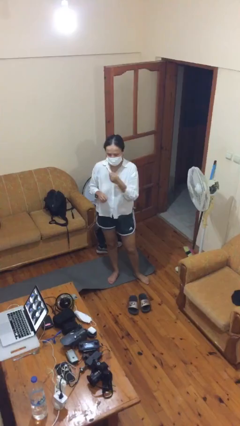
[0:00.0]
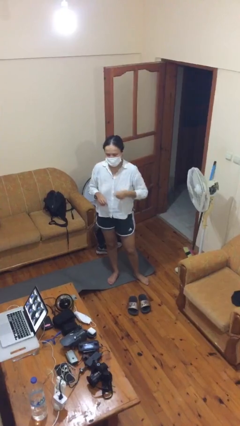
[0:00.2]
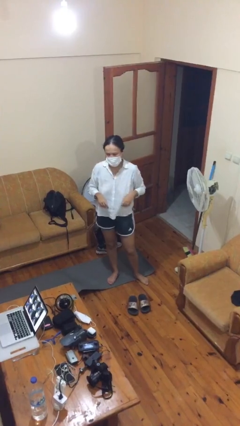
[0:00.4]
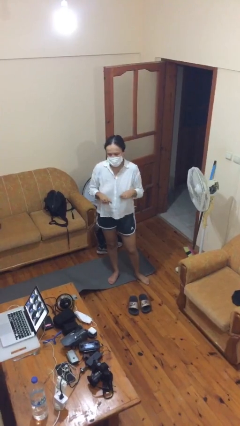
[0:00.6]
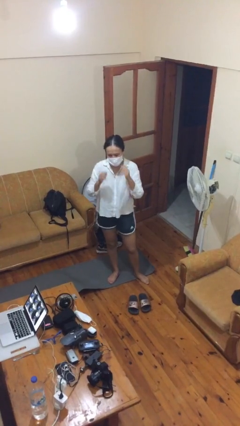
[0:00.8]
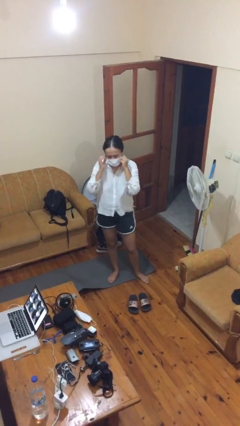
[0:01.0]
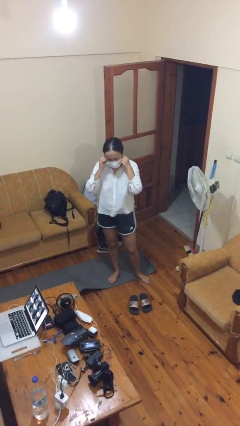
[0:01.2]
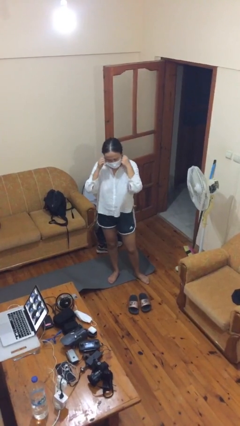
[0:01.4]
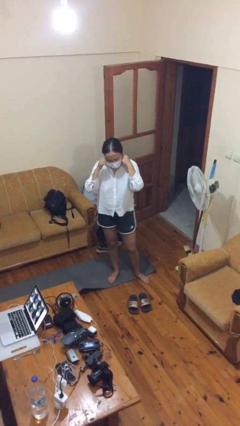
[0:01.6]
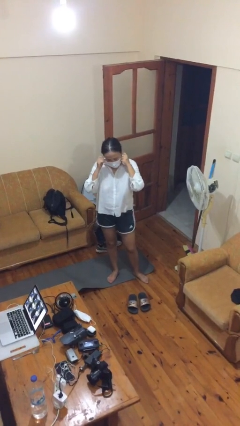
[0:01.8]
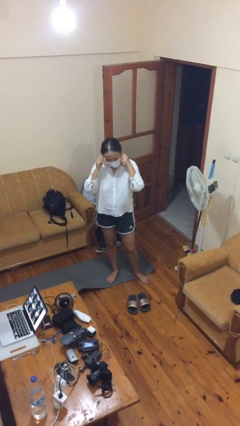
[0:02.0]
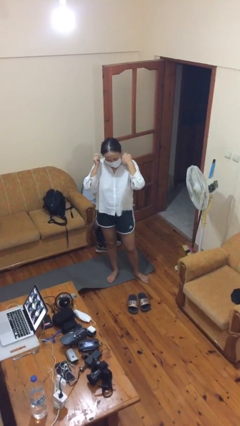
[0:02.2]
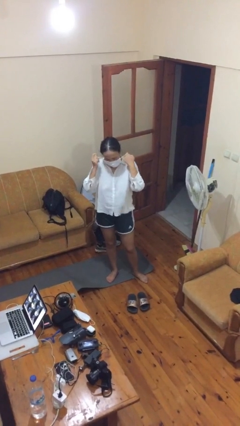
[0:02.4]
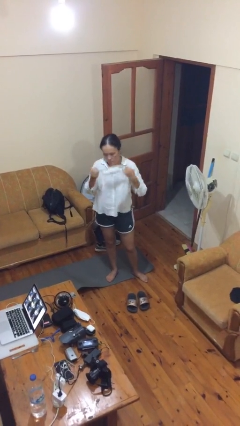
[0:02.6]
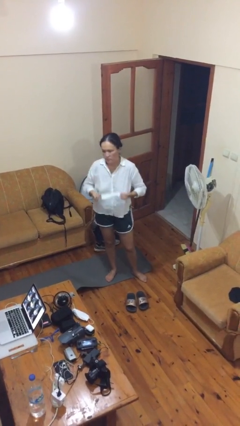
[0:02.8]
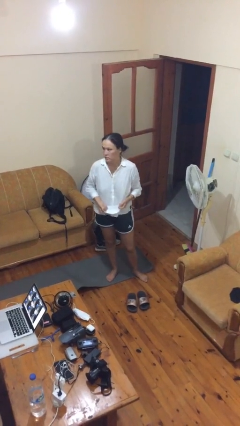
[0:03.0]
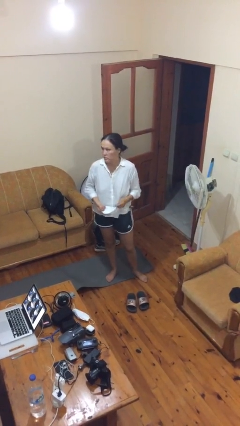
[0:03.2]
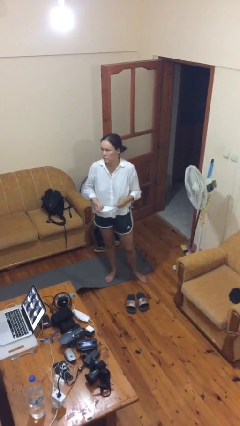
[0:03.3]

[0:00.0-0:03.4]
person takes off facemask

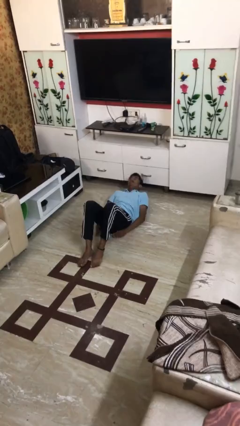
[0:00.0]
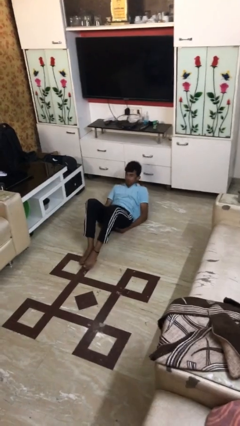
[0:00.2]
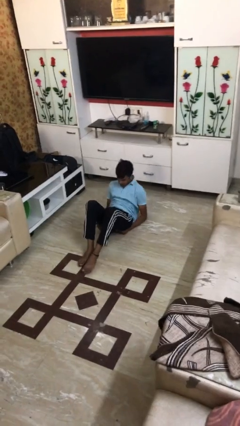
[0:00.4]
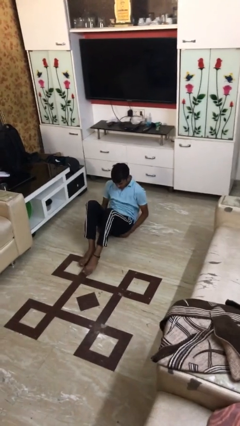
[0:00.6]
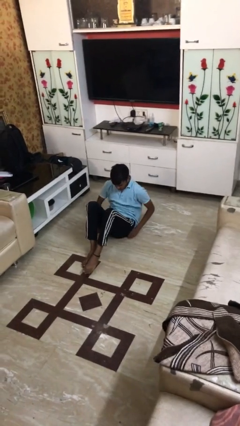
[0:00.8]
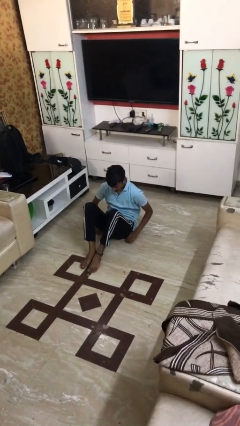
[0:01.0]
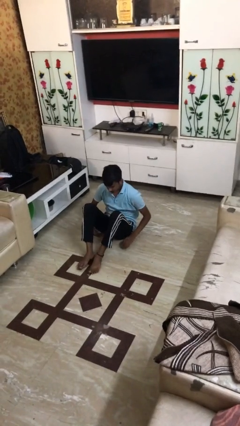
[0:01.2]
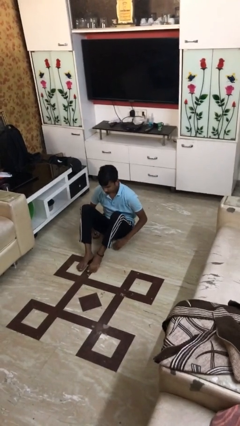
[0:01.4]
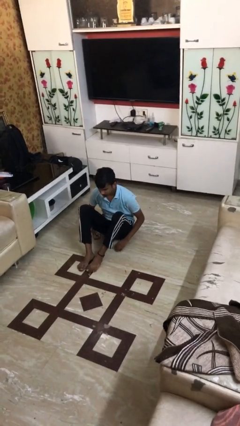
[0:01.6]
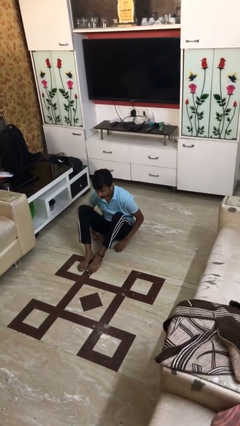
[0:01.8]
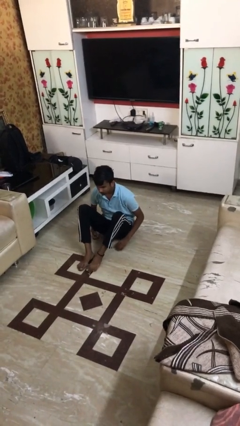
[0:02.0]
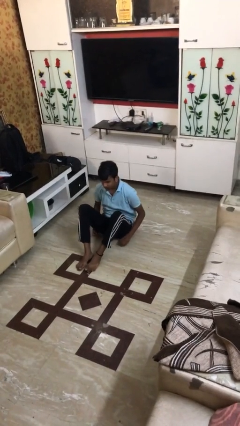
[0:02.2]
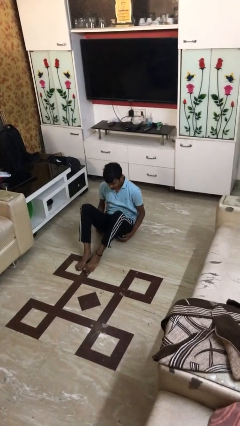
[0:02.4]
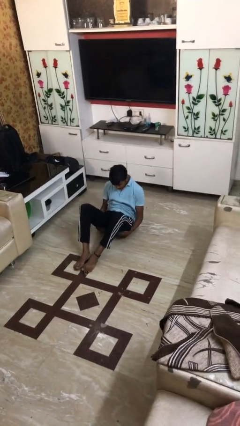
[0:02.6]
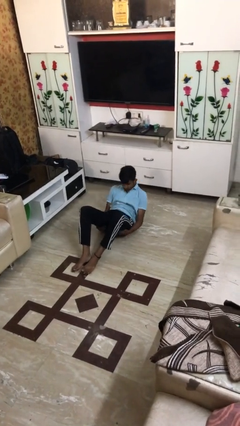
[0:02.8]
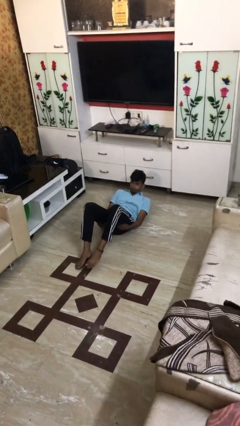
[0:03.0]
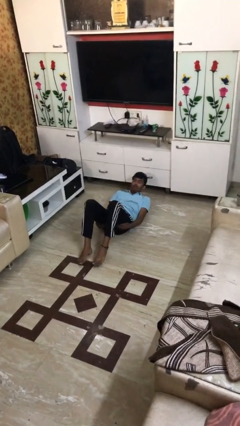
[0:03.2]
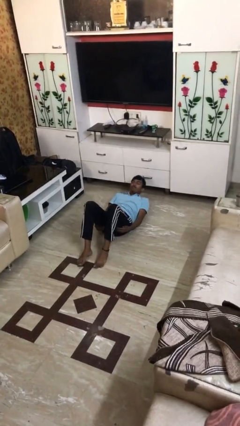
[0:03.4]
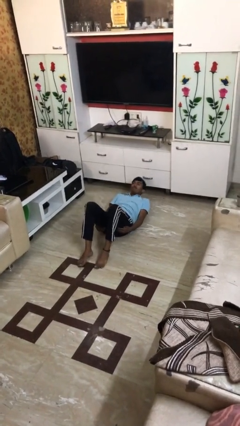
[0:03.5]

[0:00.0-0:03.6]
person exercises with situp

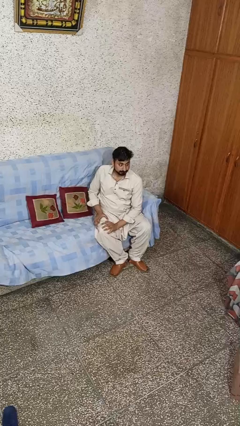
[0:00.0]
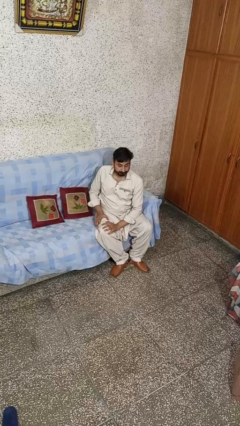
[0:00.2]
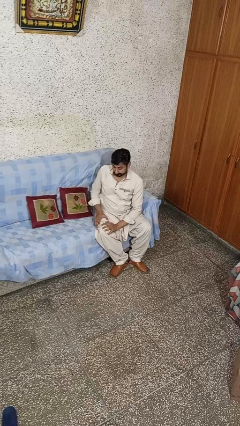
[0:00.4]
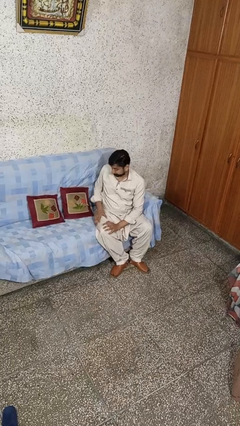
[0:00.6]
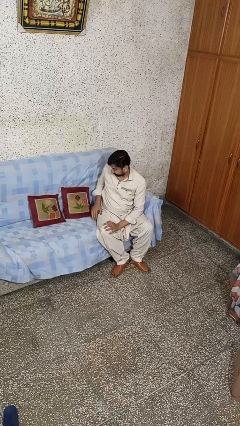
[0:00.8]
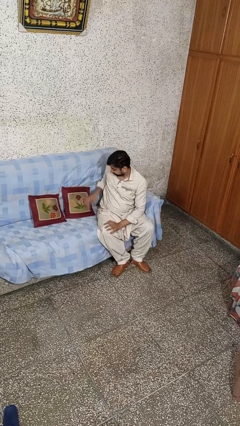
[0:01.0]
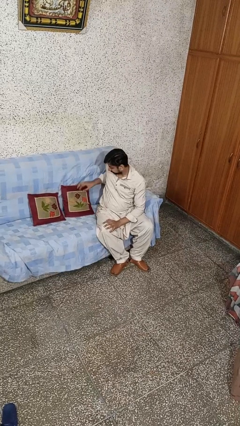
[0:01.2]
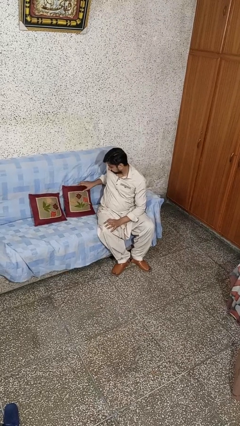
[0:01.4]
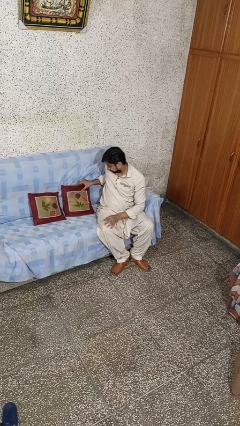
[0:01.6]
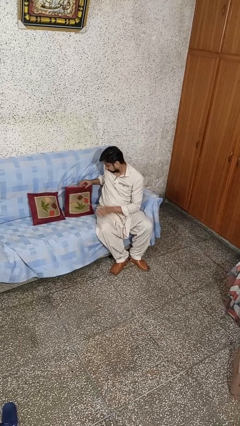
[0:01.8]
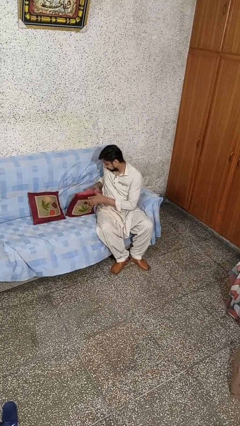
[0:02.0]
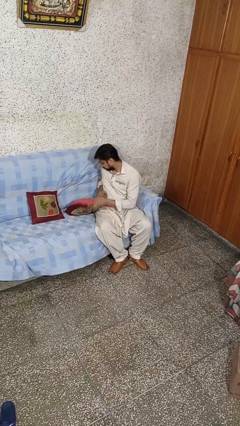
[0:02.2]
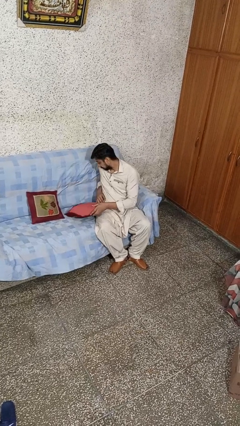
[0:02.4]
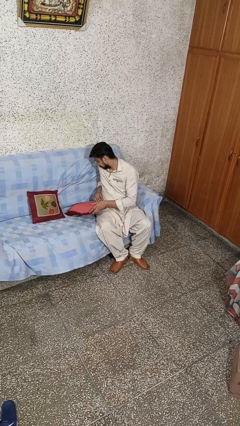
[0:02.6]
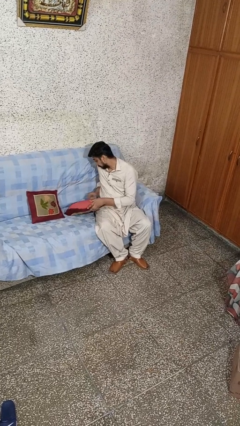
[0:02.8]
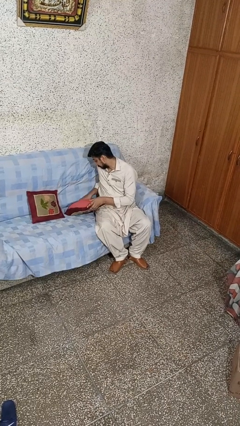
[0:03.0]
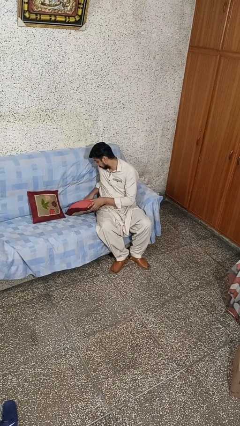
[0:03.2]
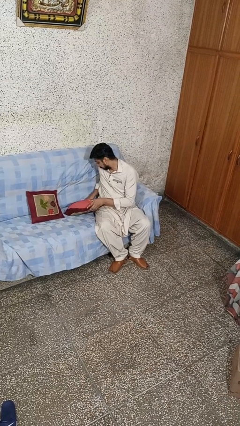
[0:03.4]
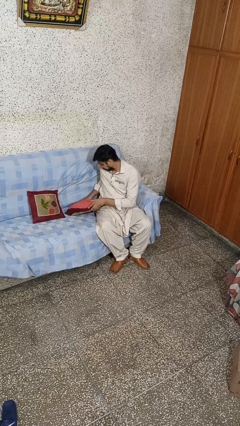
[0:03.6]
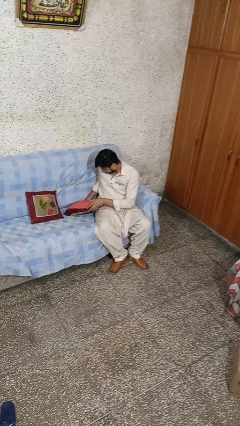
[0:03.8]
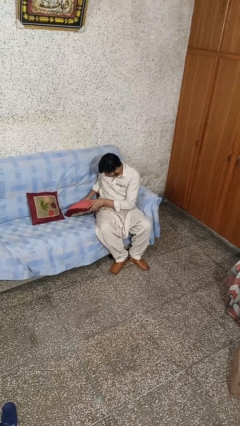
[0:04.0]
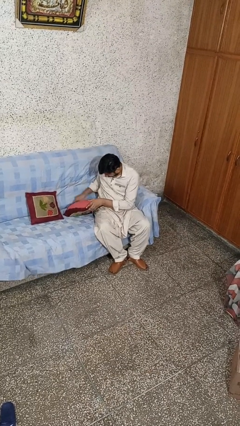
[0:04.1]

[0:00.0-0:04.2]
person searches in couch

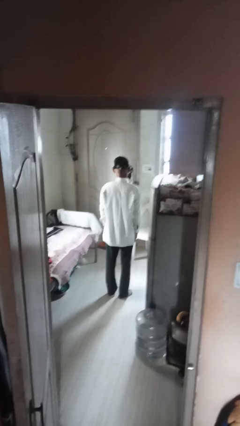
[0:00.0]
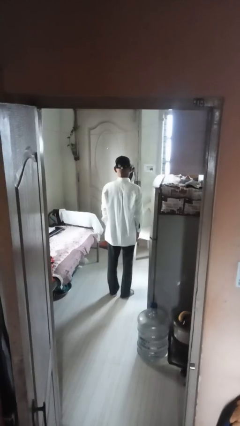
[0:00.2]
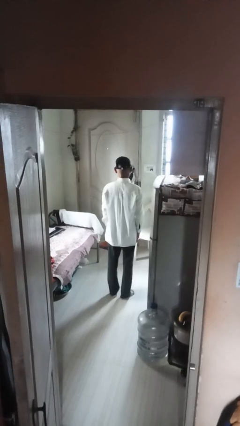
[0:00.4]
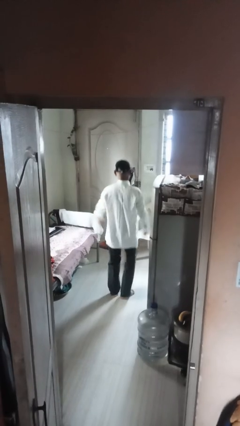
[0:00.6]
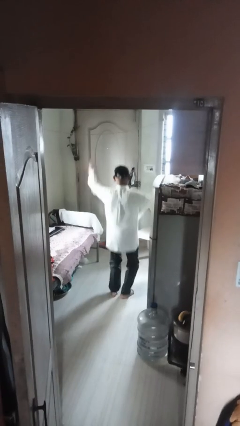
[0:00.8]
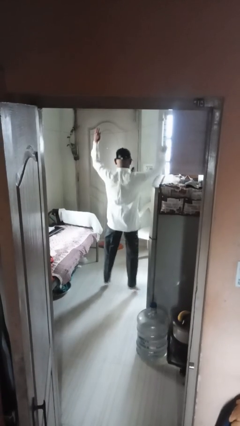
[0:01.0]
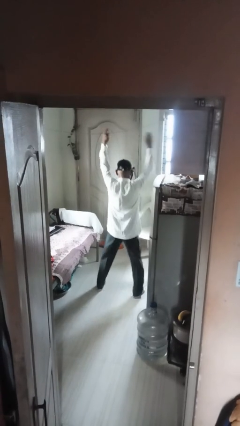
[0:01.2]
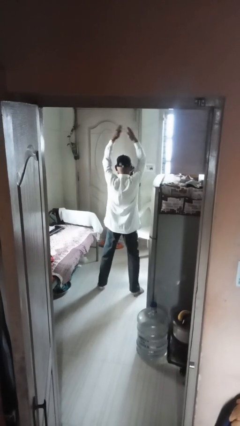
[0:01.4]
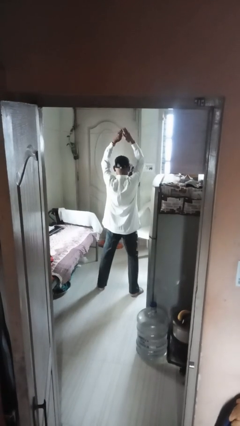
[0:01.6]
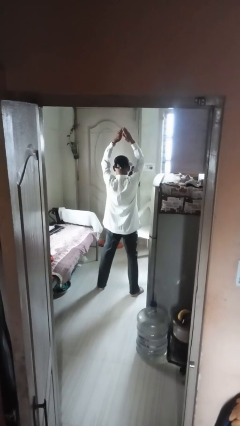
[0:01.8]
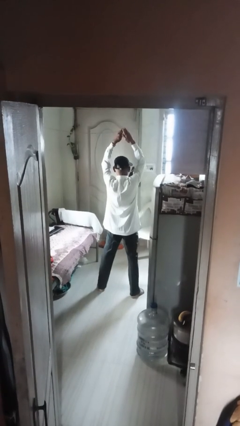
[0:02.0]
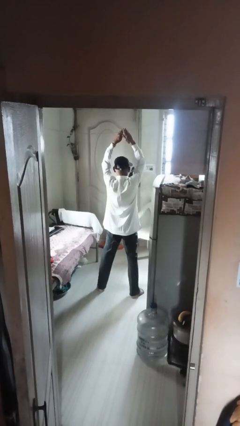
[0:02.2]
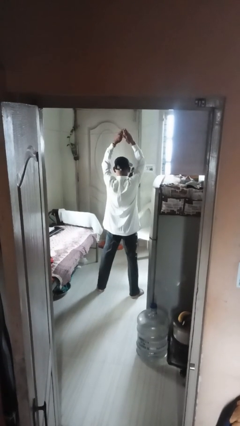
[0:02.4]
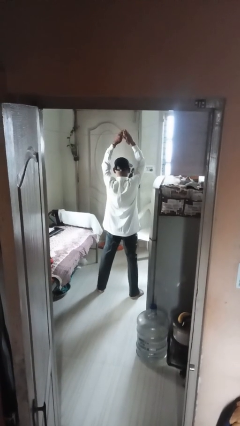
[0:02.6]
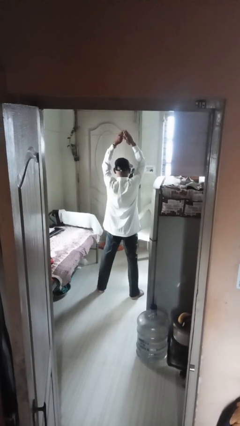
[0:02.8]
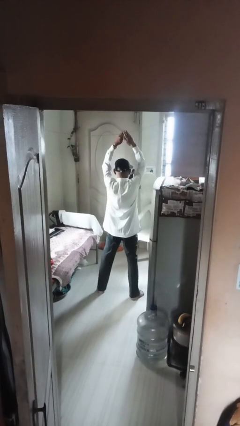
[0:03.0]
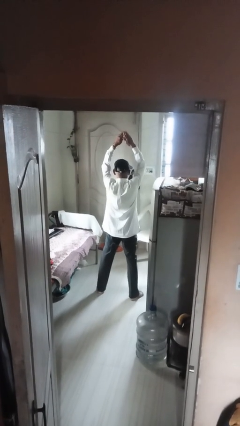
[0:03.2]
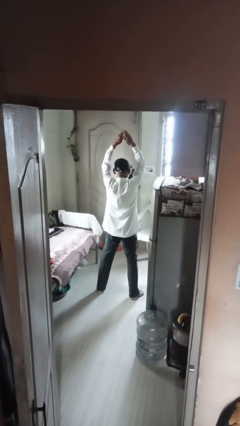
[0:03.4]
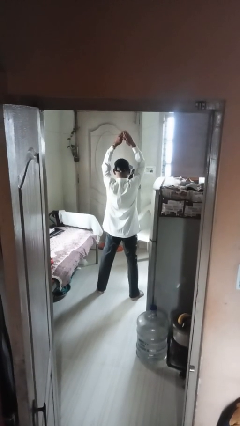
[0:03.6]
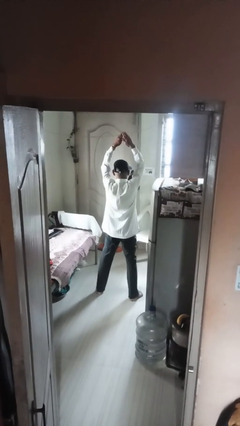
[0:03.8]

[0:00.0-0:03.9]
person exercises with jumping jacks

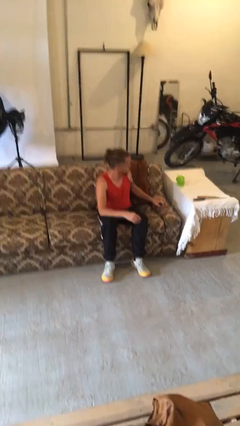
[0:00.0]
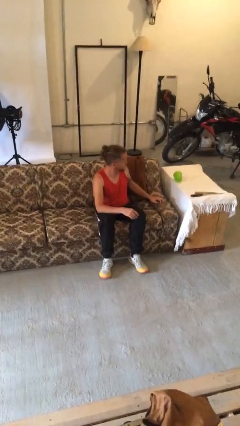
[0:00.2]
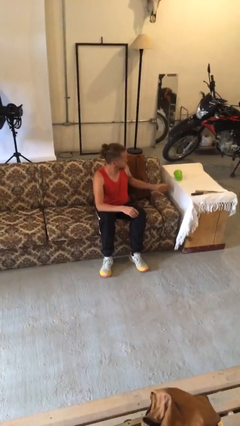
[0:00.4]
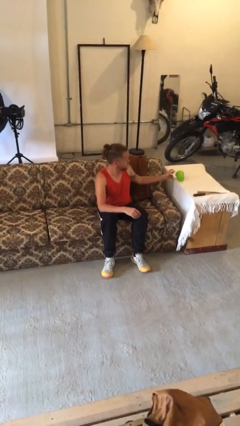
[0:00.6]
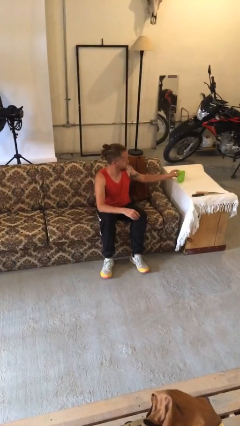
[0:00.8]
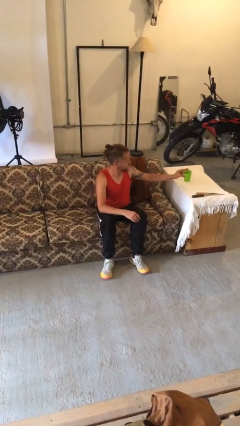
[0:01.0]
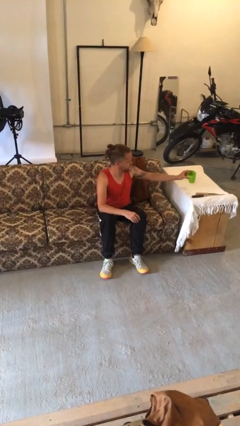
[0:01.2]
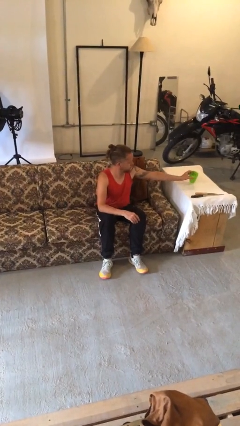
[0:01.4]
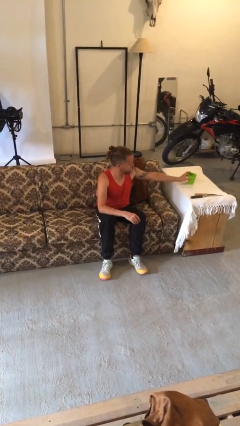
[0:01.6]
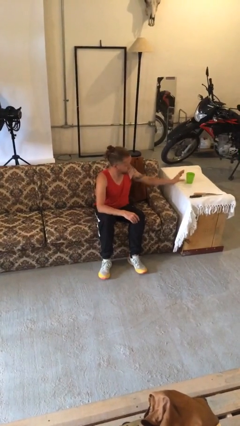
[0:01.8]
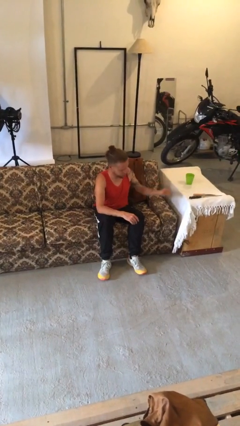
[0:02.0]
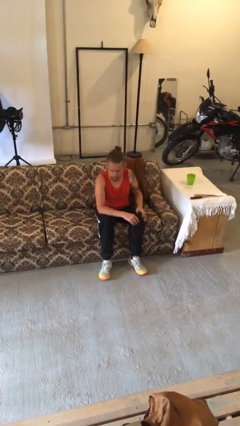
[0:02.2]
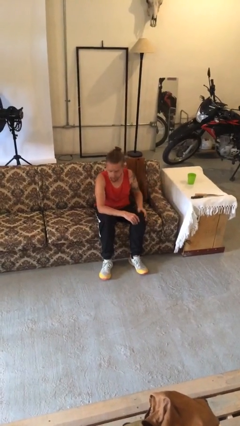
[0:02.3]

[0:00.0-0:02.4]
person sets upright glass

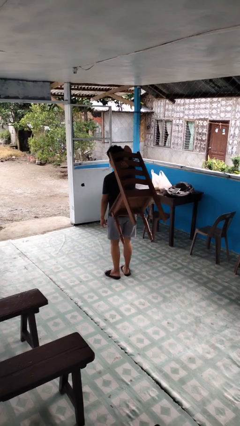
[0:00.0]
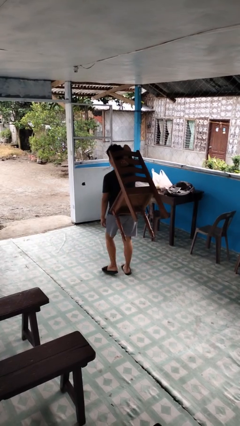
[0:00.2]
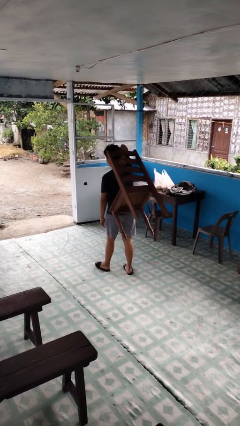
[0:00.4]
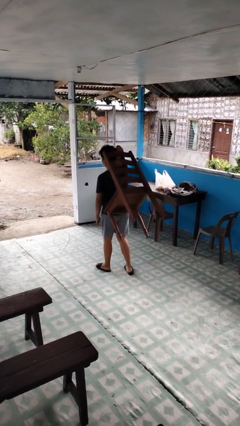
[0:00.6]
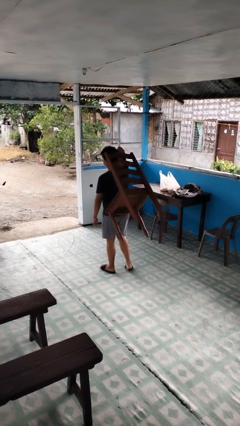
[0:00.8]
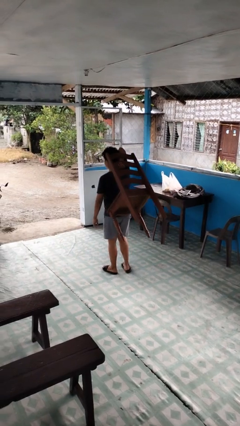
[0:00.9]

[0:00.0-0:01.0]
person carries furniture
